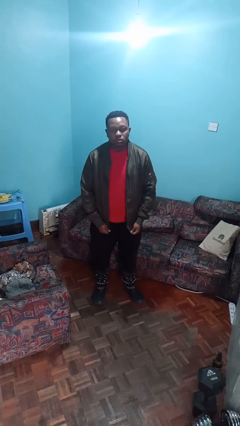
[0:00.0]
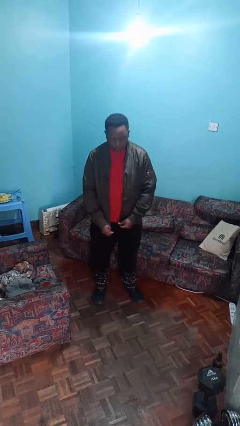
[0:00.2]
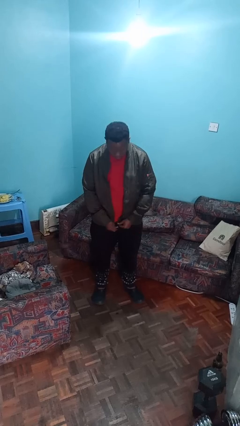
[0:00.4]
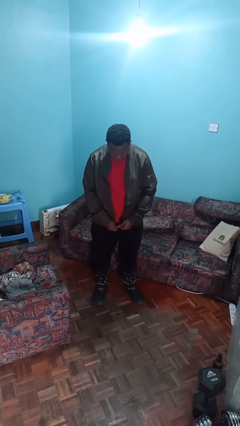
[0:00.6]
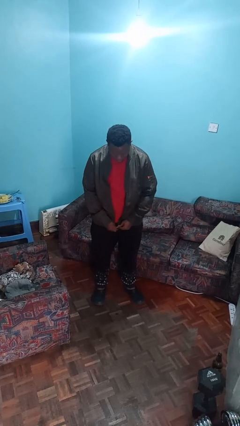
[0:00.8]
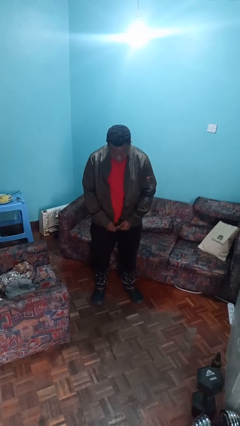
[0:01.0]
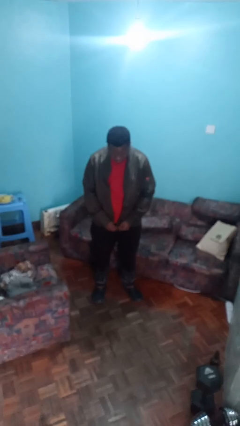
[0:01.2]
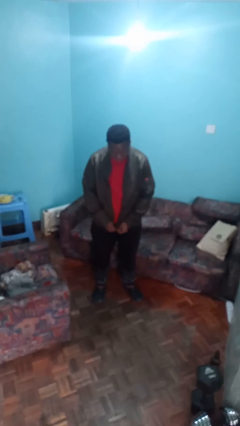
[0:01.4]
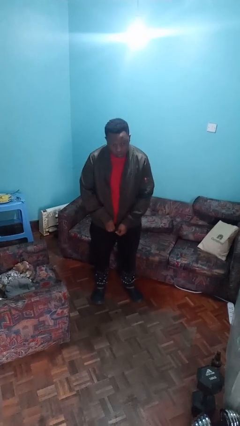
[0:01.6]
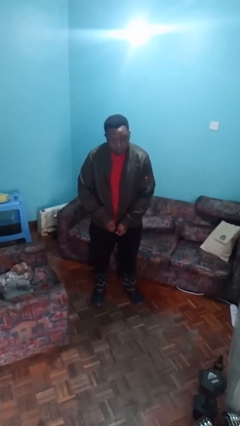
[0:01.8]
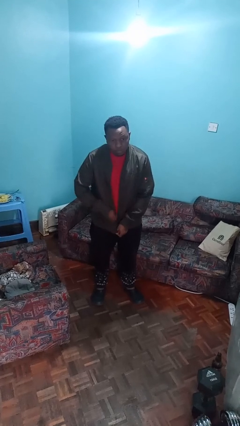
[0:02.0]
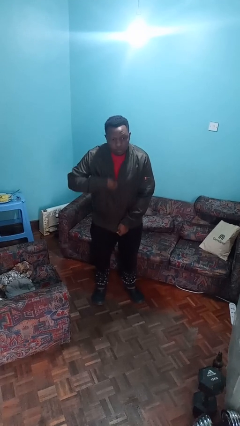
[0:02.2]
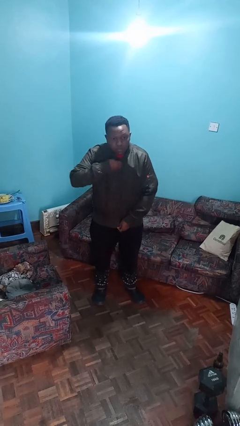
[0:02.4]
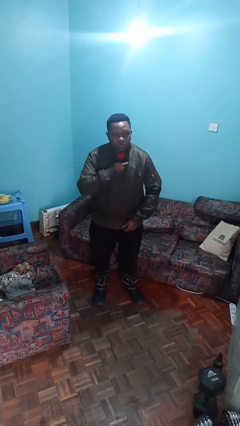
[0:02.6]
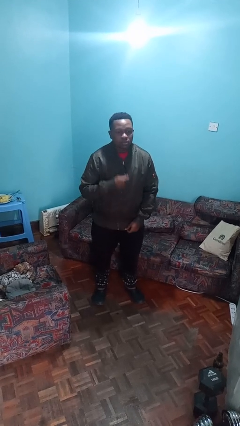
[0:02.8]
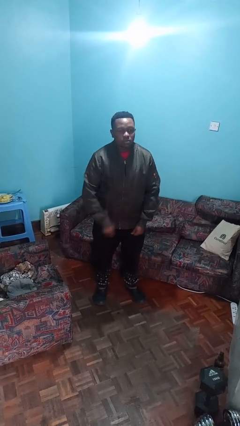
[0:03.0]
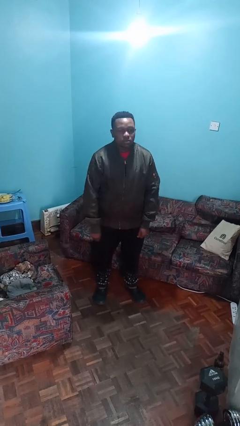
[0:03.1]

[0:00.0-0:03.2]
person zips up jacket

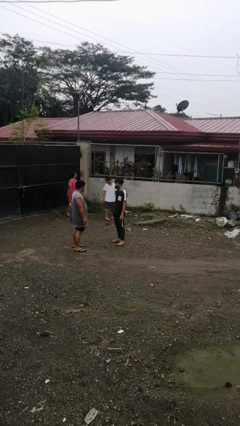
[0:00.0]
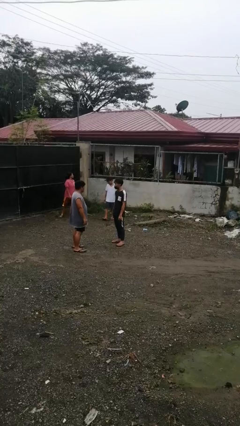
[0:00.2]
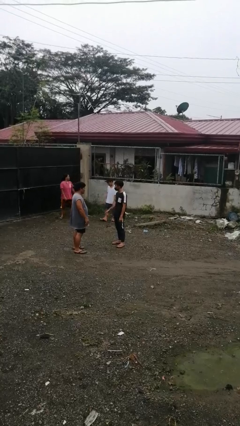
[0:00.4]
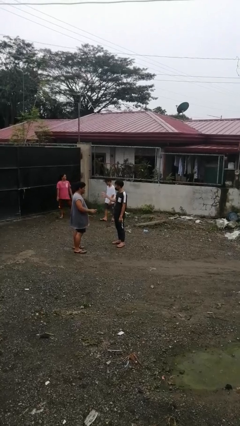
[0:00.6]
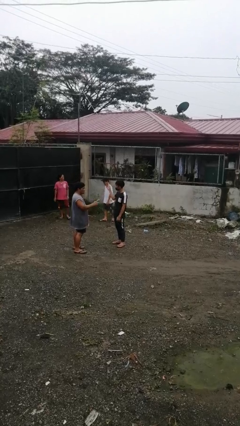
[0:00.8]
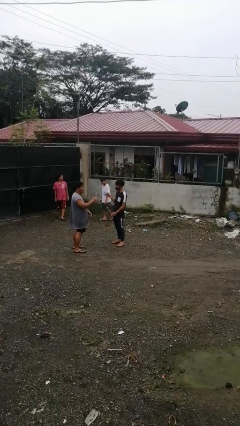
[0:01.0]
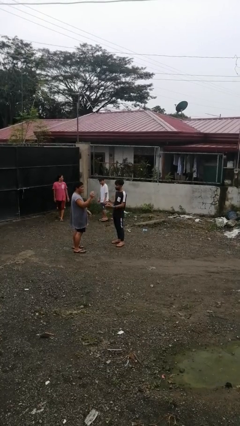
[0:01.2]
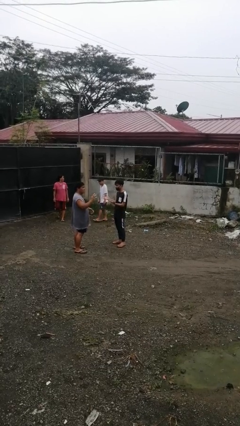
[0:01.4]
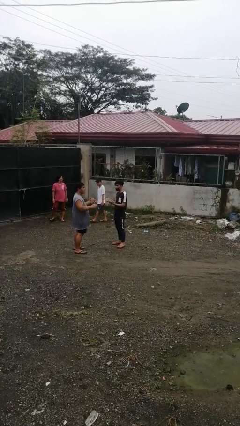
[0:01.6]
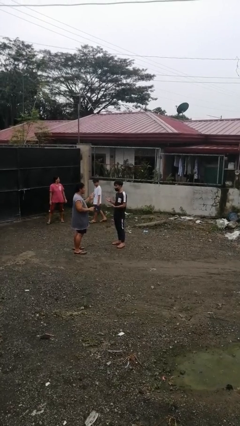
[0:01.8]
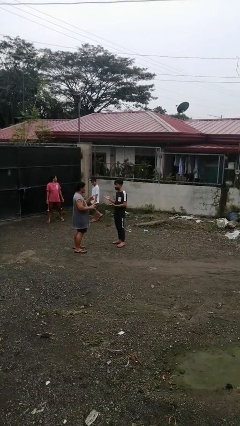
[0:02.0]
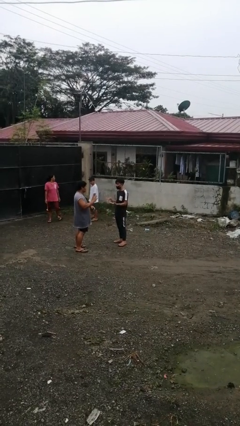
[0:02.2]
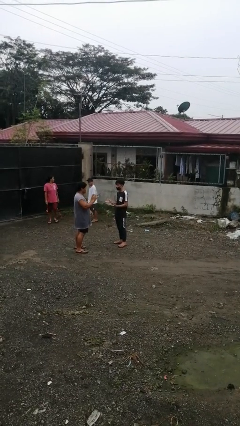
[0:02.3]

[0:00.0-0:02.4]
person talks to person

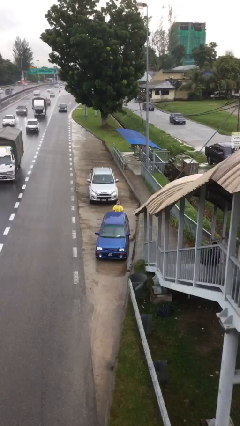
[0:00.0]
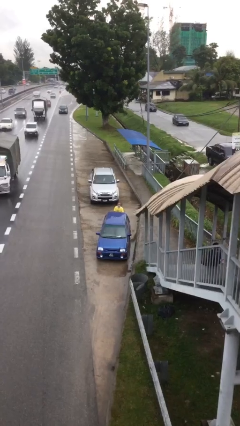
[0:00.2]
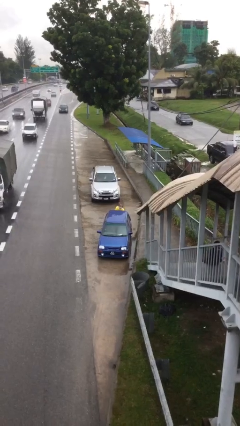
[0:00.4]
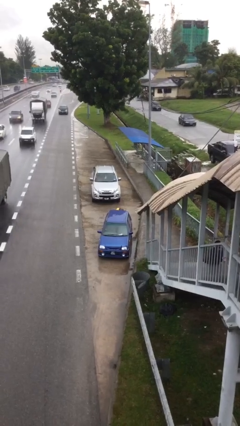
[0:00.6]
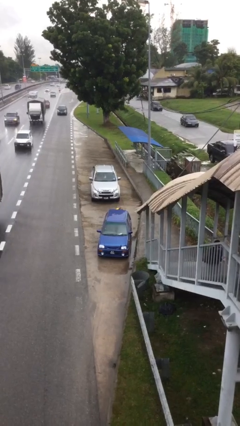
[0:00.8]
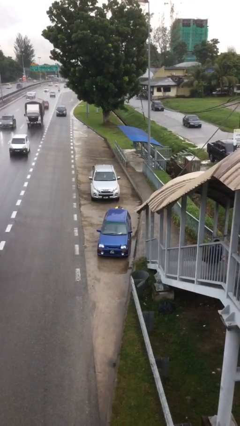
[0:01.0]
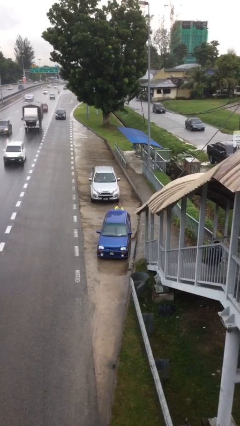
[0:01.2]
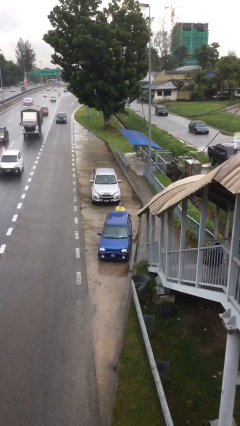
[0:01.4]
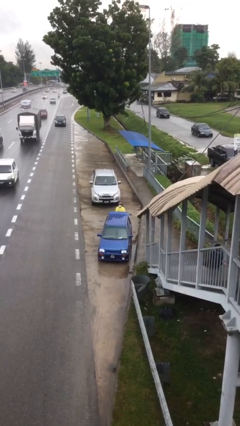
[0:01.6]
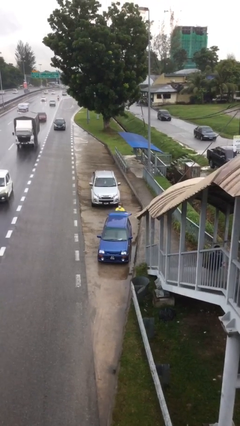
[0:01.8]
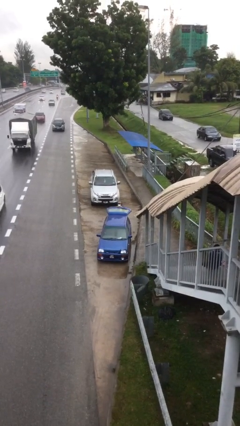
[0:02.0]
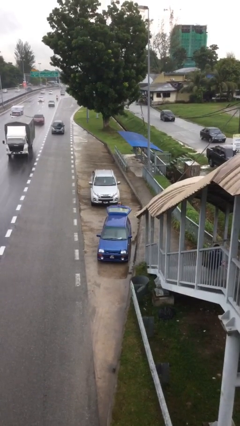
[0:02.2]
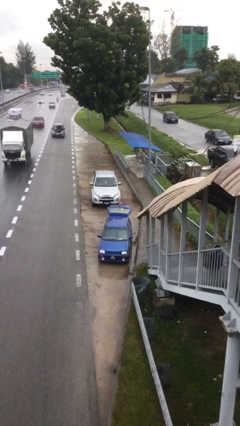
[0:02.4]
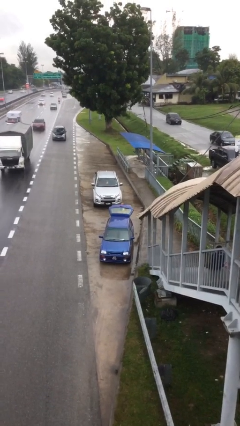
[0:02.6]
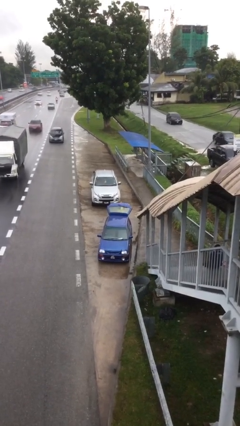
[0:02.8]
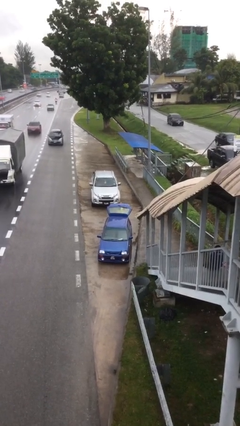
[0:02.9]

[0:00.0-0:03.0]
person opens car trunk

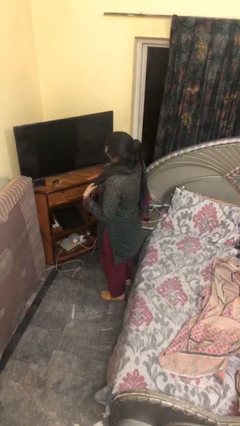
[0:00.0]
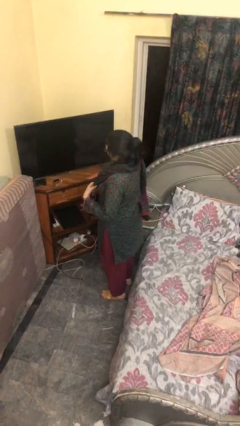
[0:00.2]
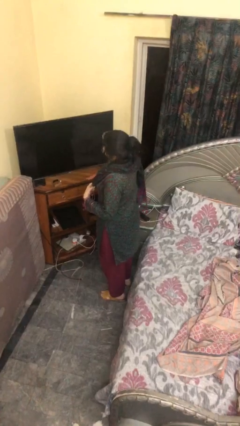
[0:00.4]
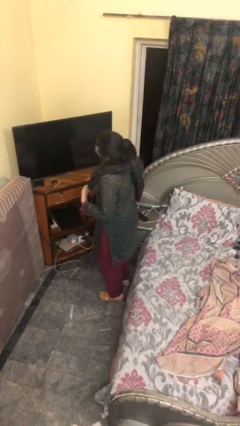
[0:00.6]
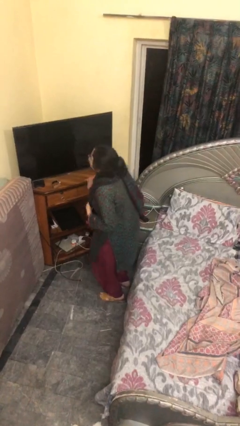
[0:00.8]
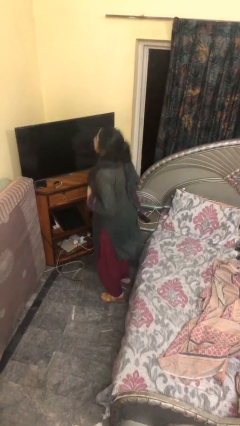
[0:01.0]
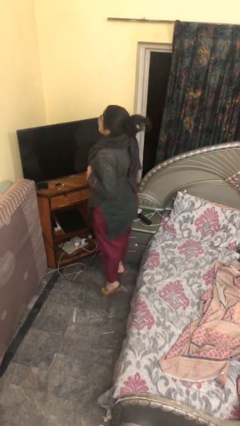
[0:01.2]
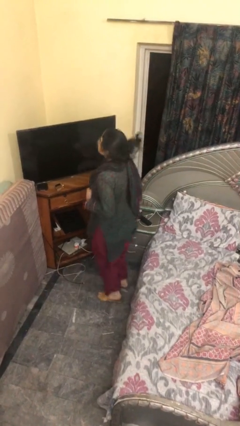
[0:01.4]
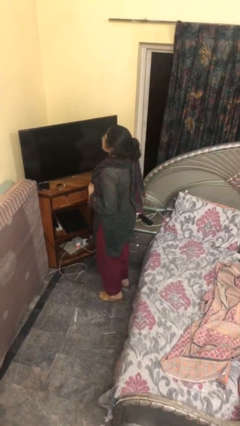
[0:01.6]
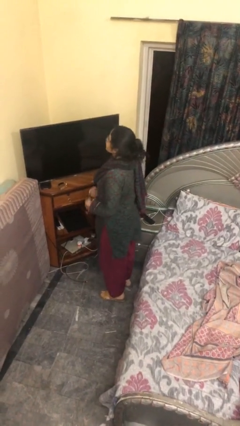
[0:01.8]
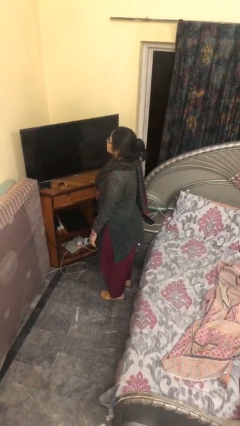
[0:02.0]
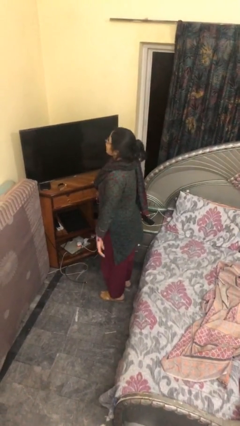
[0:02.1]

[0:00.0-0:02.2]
person jumps

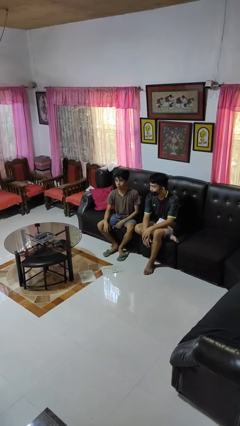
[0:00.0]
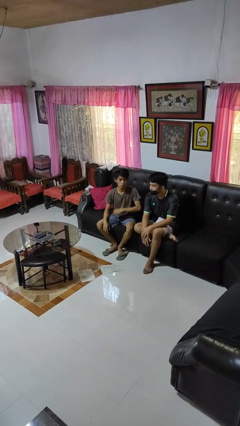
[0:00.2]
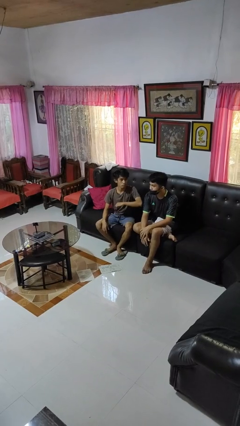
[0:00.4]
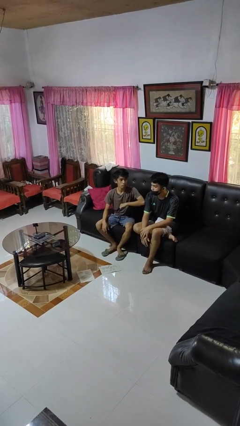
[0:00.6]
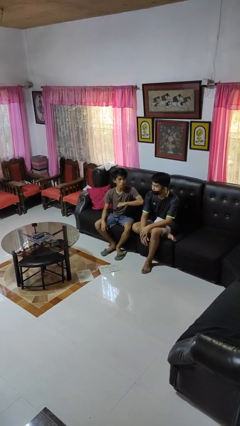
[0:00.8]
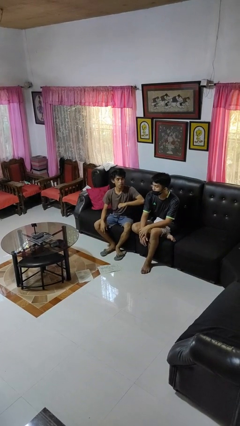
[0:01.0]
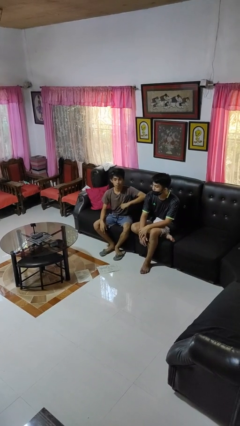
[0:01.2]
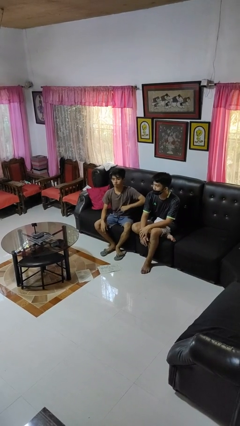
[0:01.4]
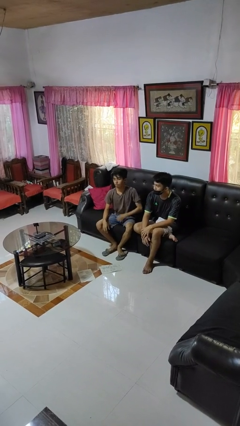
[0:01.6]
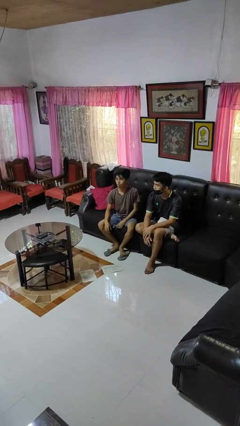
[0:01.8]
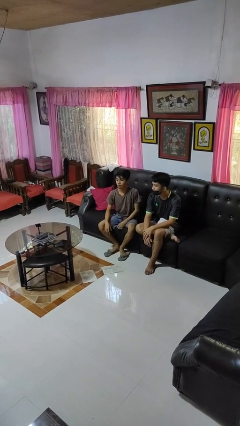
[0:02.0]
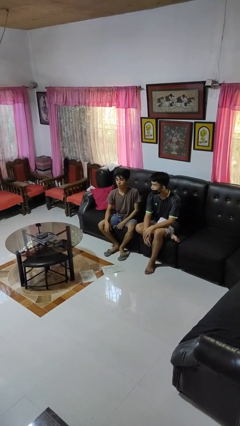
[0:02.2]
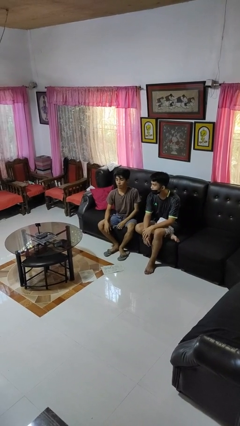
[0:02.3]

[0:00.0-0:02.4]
person nudges person with elbow

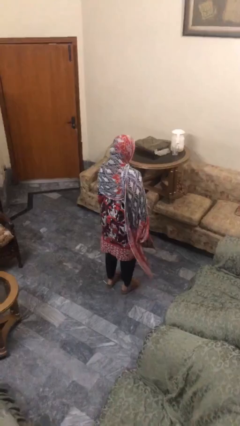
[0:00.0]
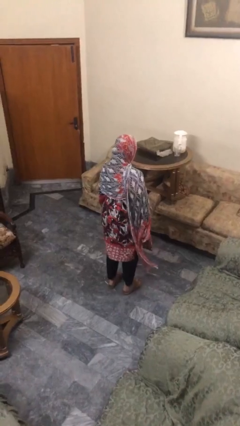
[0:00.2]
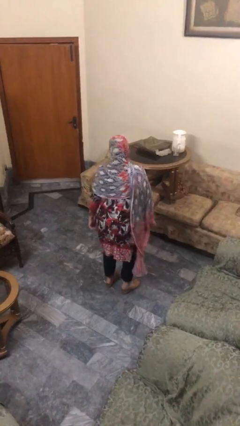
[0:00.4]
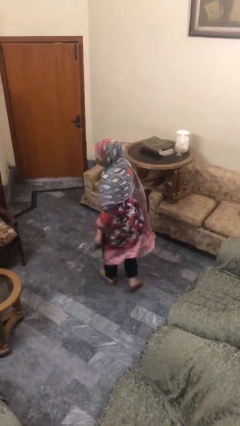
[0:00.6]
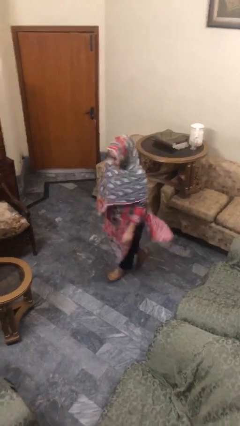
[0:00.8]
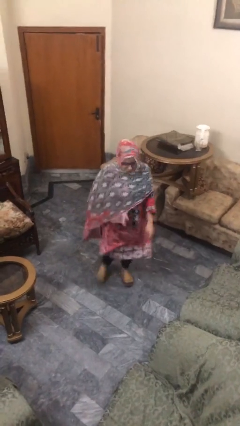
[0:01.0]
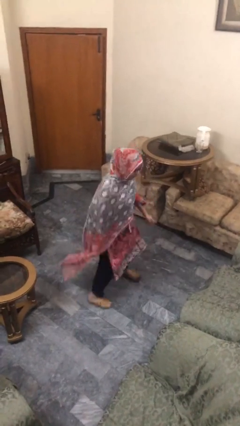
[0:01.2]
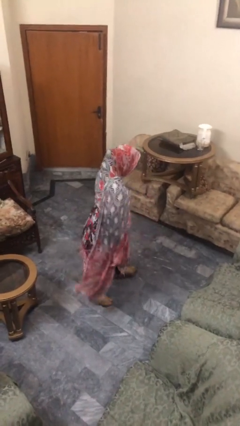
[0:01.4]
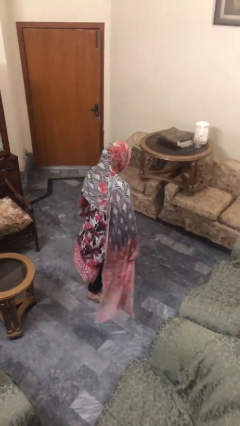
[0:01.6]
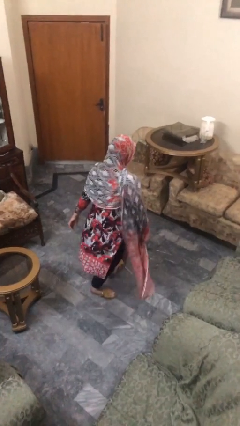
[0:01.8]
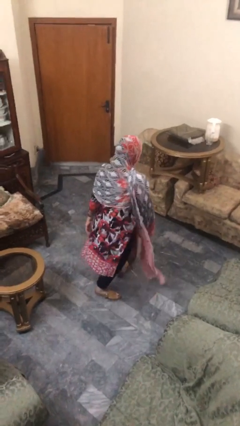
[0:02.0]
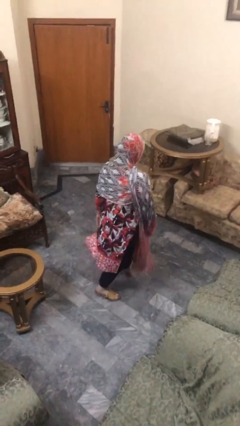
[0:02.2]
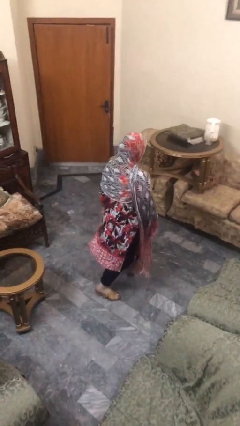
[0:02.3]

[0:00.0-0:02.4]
person twirls

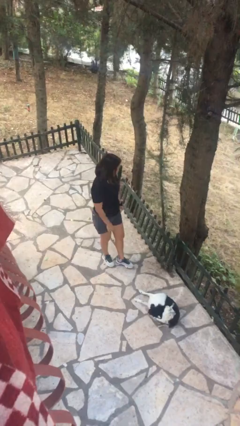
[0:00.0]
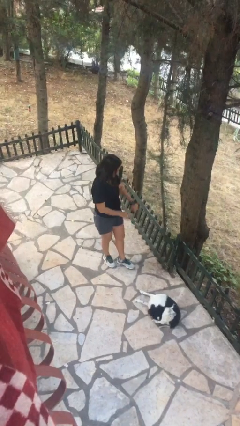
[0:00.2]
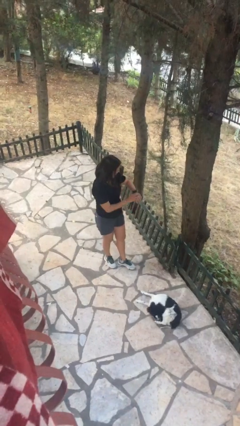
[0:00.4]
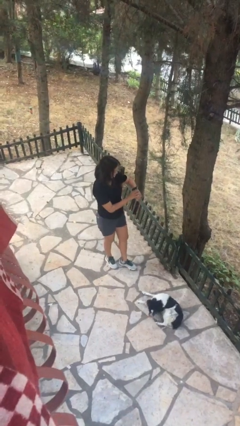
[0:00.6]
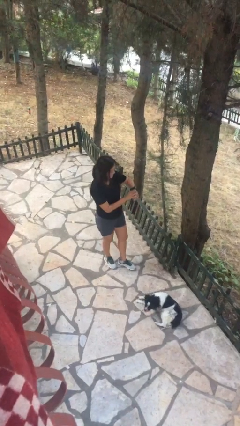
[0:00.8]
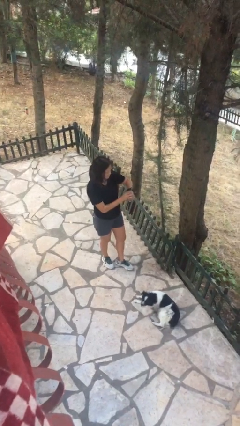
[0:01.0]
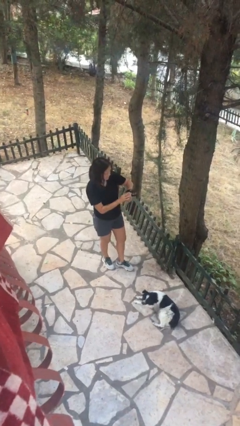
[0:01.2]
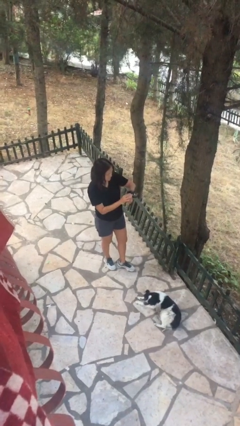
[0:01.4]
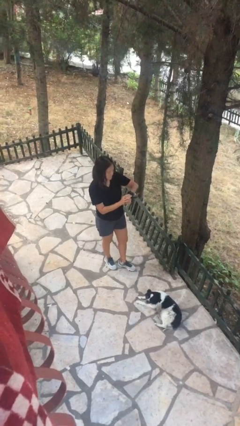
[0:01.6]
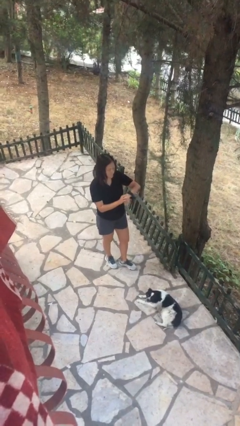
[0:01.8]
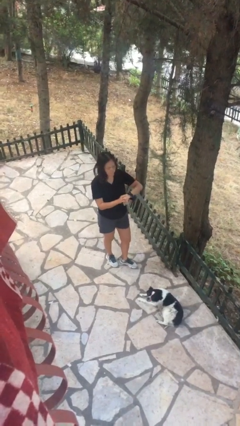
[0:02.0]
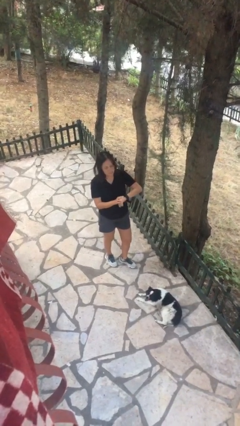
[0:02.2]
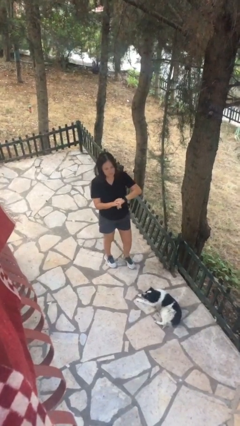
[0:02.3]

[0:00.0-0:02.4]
person looks at wristwatch
